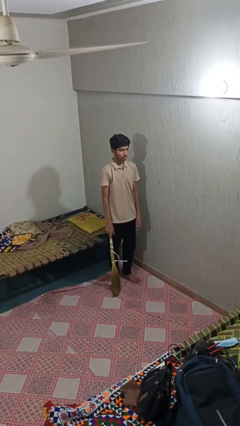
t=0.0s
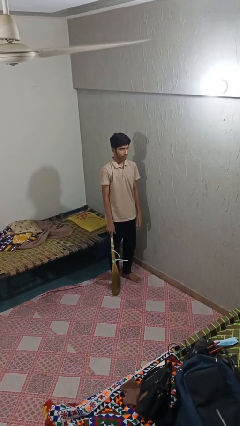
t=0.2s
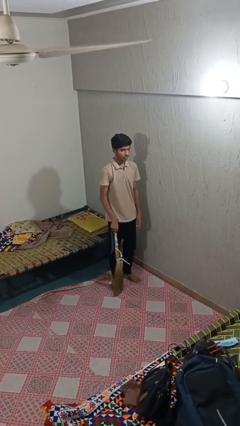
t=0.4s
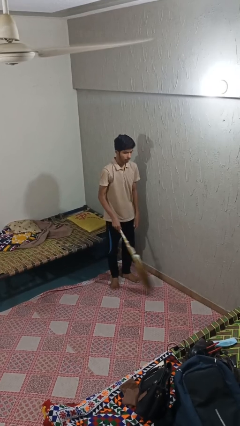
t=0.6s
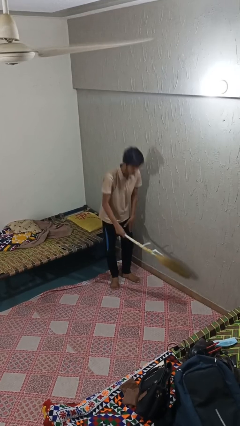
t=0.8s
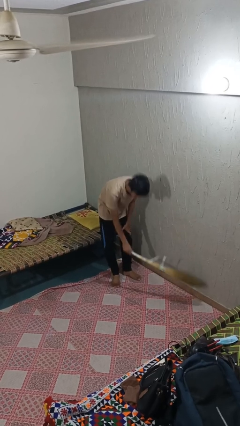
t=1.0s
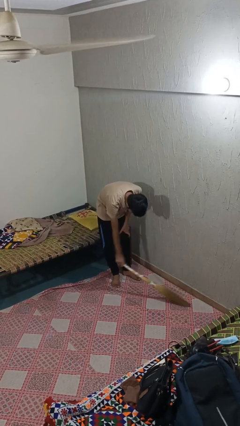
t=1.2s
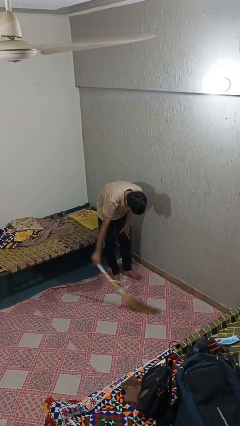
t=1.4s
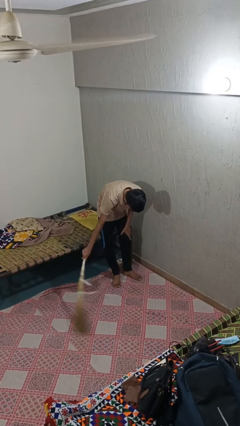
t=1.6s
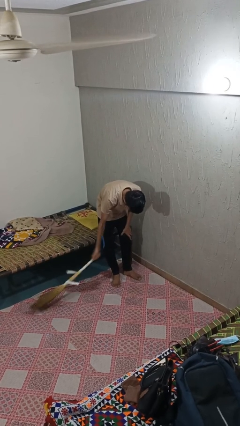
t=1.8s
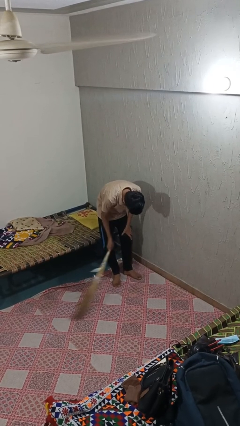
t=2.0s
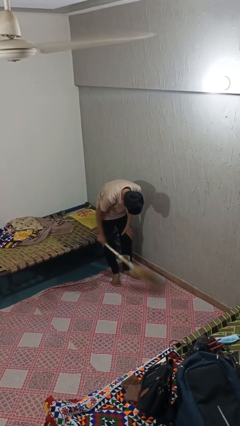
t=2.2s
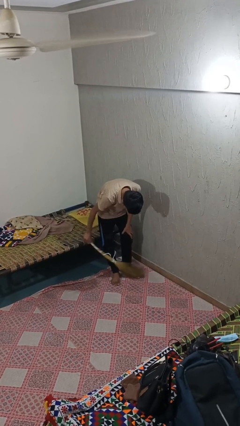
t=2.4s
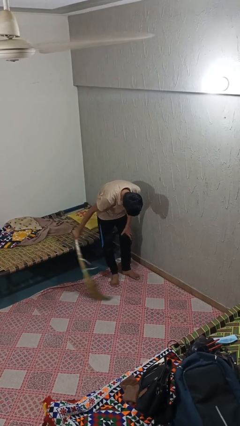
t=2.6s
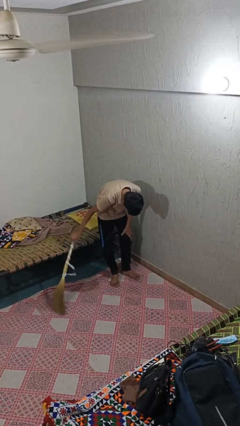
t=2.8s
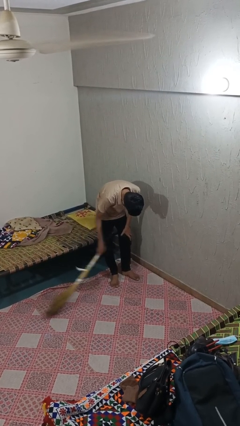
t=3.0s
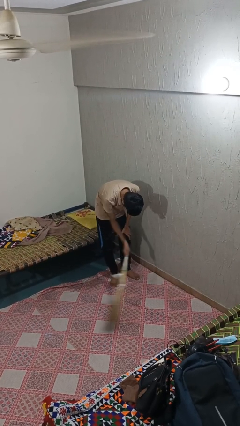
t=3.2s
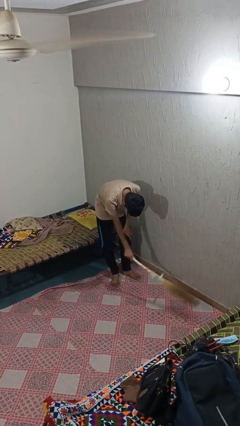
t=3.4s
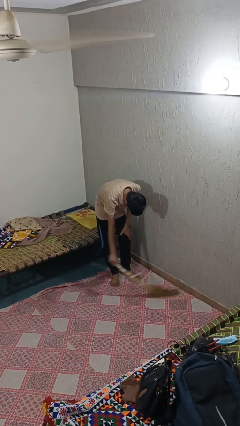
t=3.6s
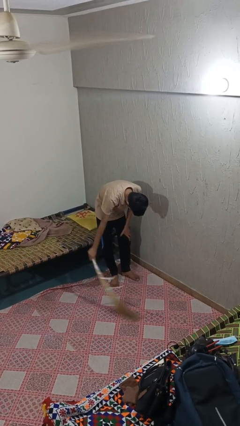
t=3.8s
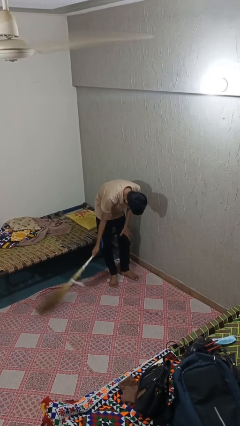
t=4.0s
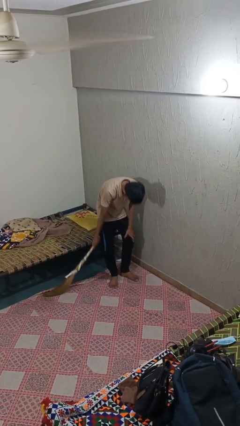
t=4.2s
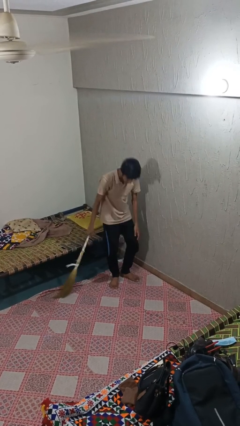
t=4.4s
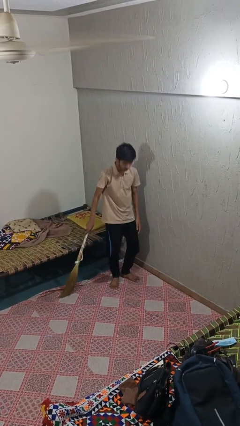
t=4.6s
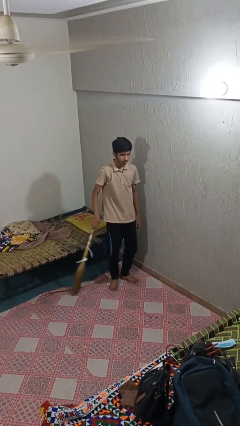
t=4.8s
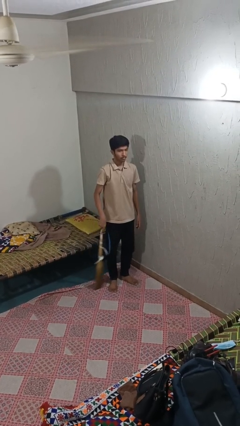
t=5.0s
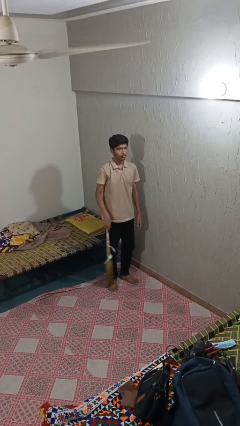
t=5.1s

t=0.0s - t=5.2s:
person sweeps floor

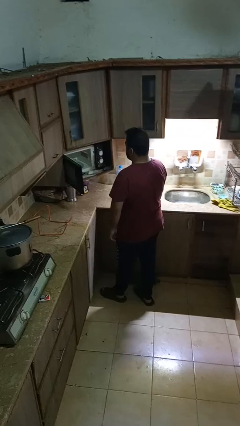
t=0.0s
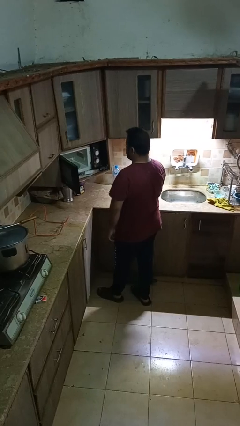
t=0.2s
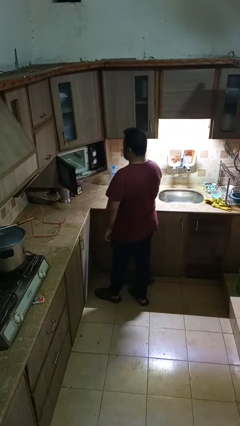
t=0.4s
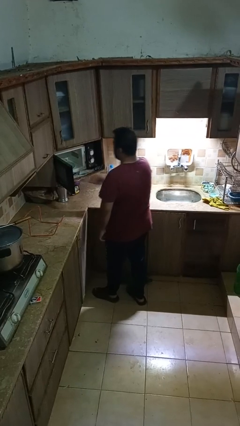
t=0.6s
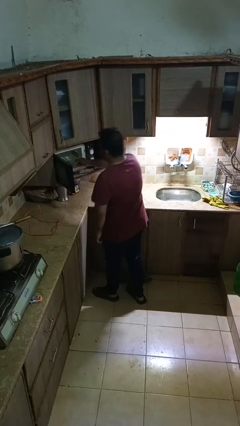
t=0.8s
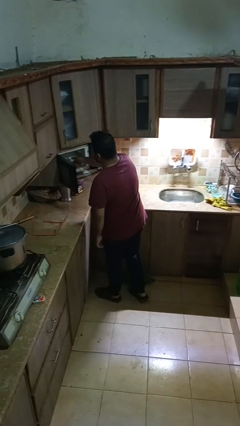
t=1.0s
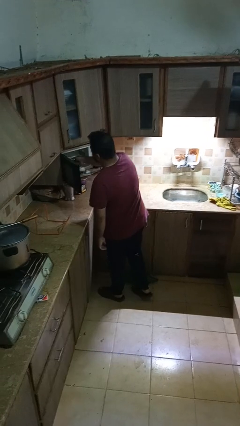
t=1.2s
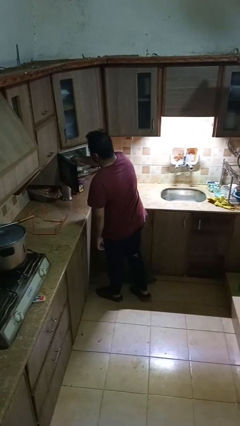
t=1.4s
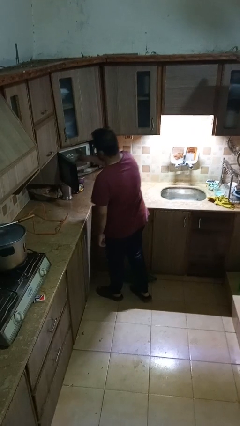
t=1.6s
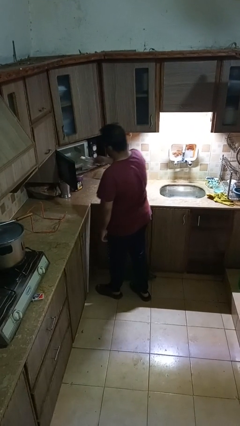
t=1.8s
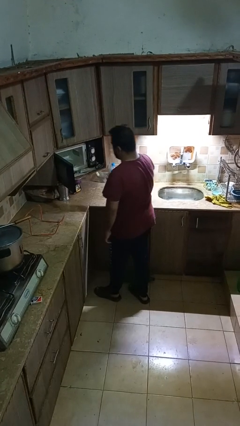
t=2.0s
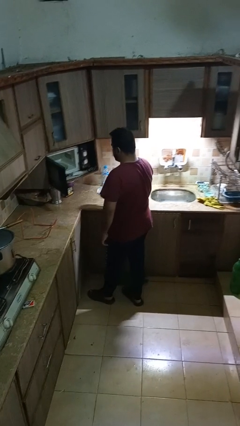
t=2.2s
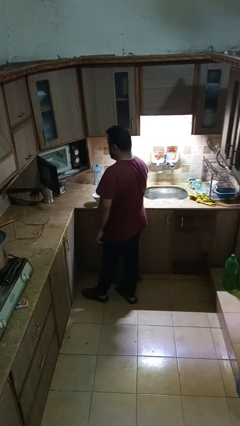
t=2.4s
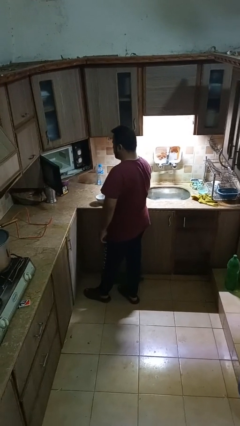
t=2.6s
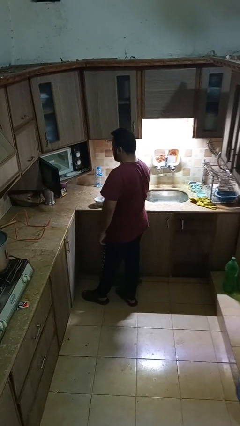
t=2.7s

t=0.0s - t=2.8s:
person takes object from microwave

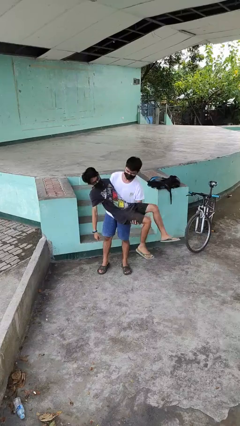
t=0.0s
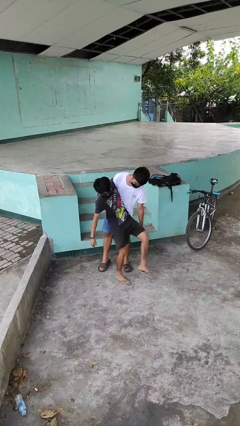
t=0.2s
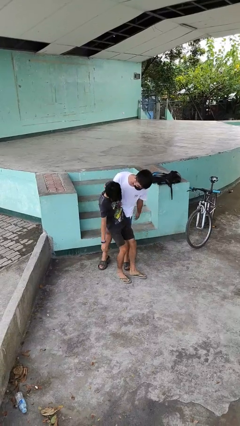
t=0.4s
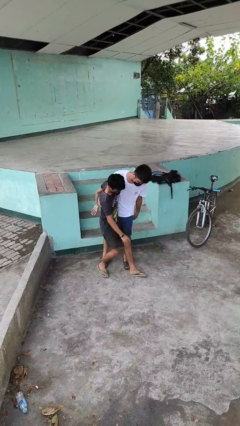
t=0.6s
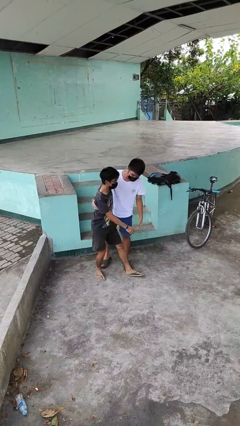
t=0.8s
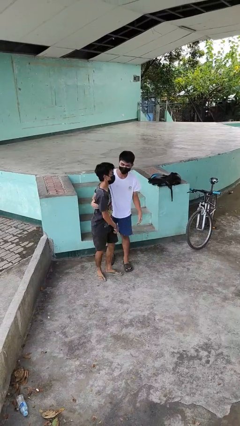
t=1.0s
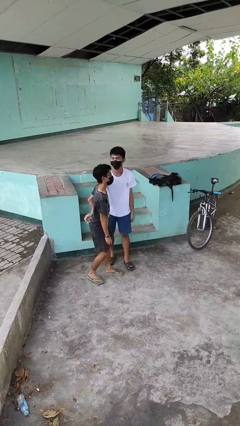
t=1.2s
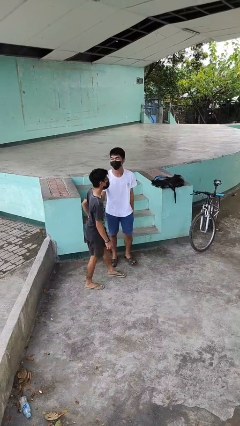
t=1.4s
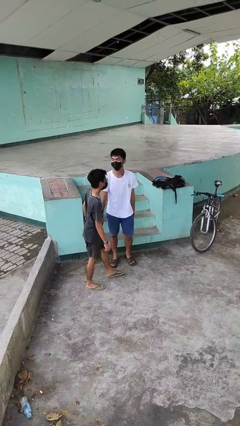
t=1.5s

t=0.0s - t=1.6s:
person puts down person

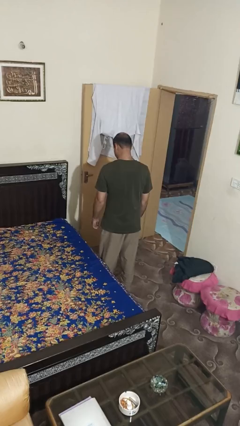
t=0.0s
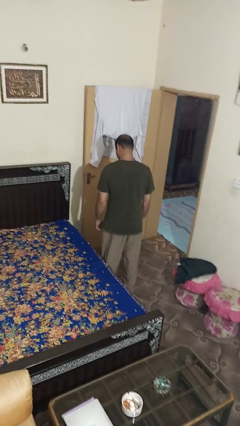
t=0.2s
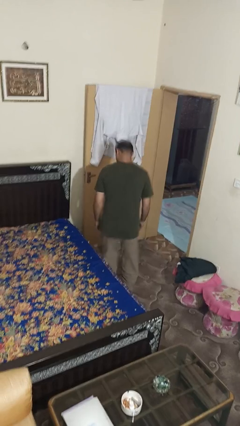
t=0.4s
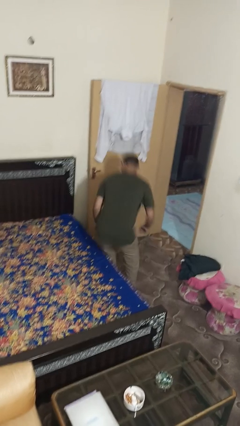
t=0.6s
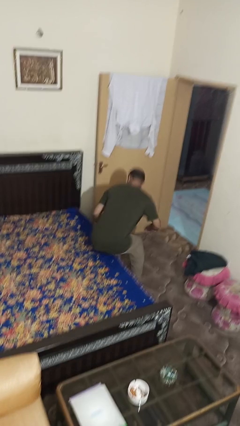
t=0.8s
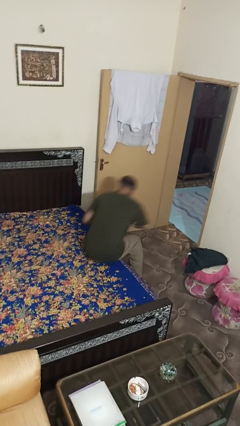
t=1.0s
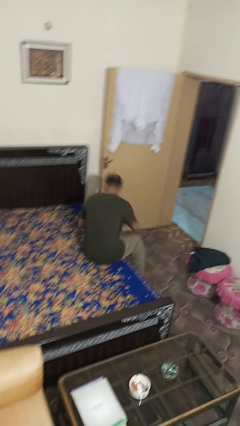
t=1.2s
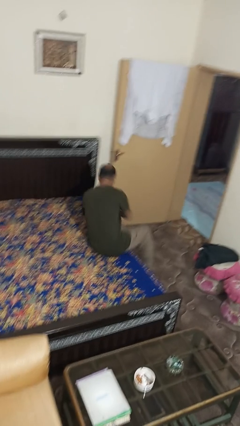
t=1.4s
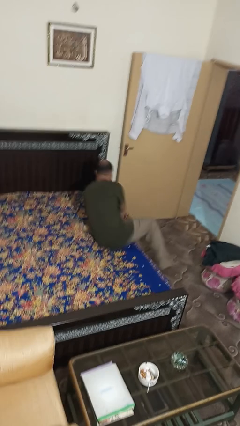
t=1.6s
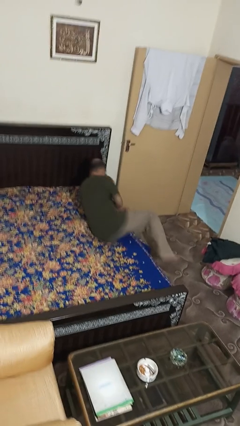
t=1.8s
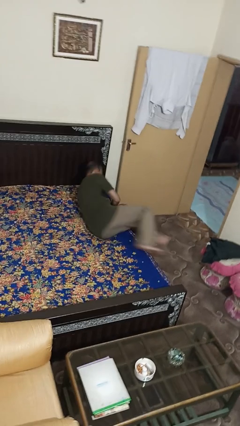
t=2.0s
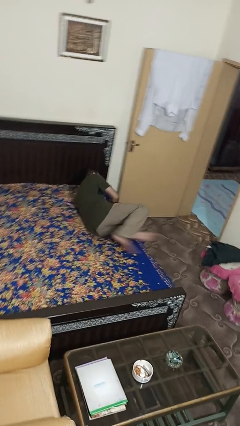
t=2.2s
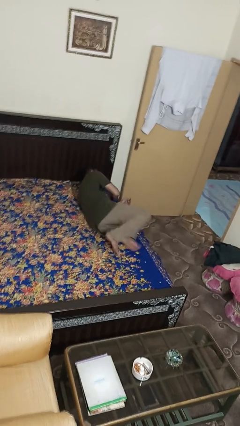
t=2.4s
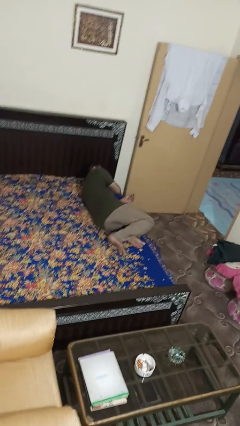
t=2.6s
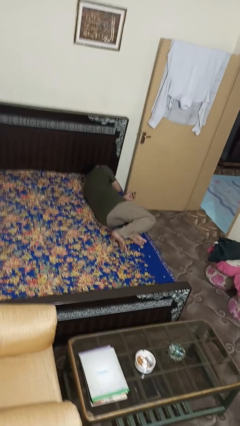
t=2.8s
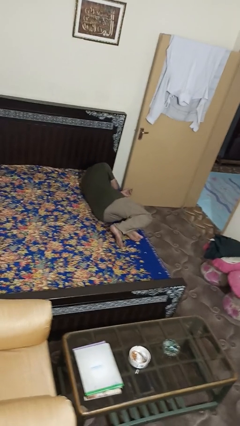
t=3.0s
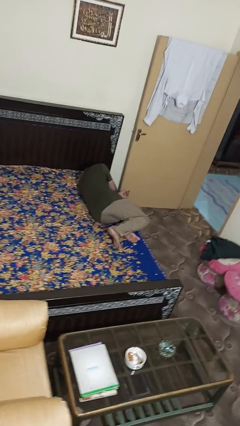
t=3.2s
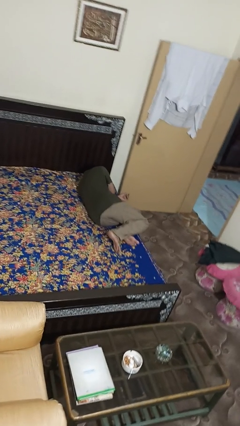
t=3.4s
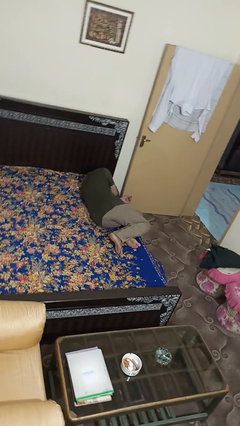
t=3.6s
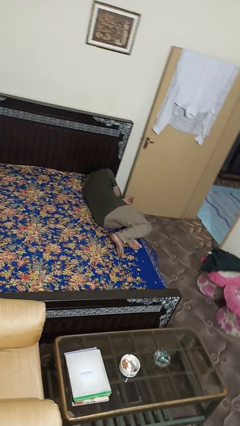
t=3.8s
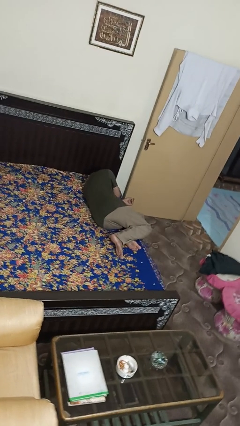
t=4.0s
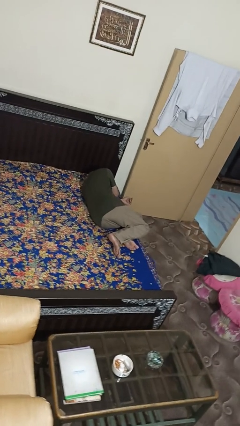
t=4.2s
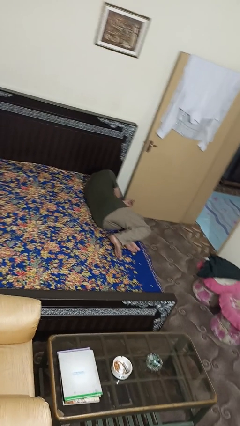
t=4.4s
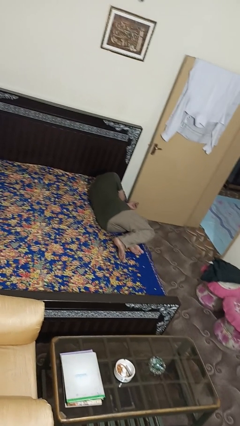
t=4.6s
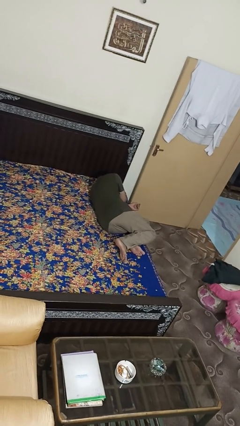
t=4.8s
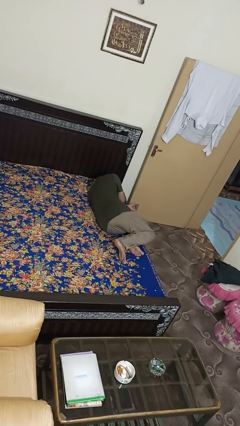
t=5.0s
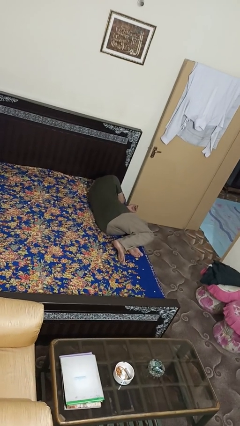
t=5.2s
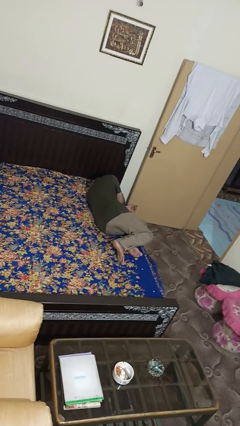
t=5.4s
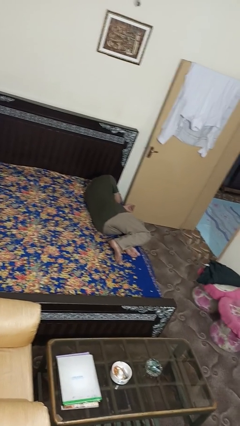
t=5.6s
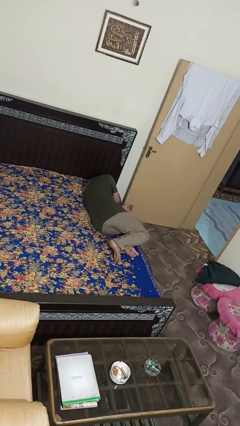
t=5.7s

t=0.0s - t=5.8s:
person lies down on bed

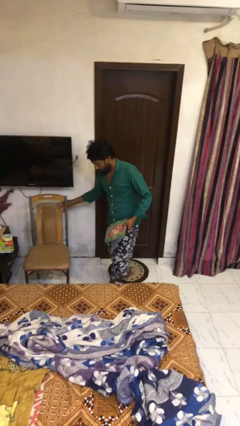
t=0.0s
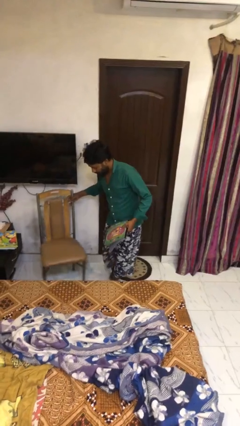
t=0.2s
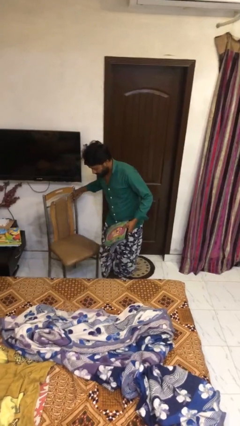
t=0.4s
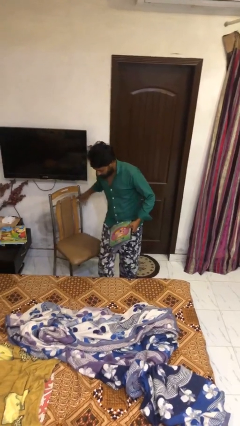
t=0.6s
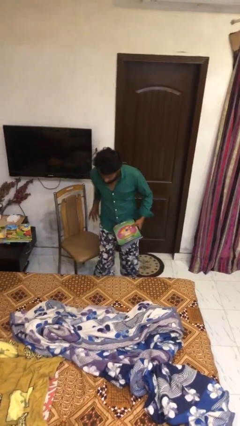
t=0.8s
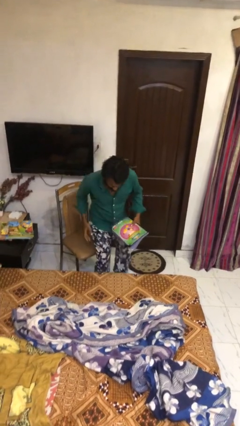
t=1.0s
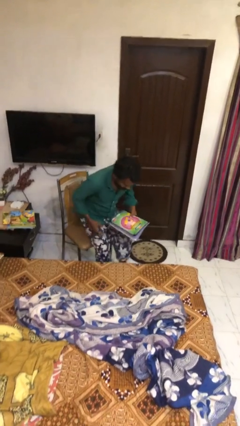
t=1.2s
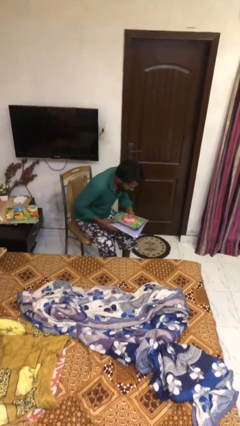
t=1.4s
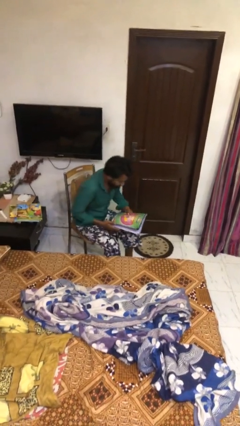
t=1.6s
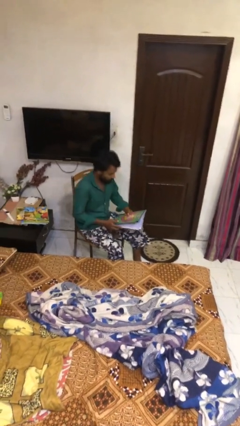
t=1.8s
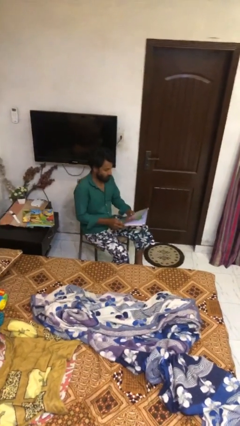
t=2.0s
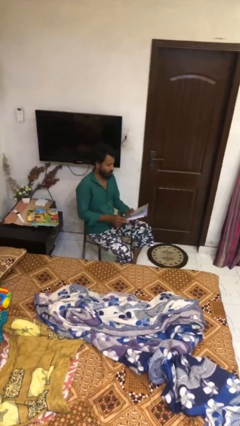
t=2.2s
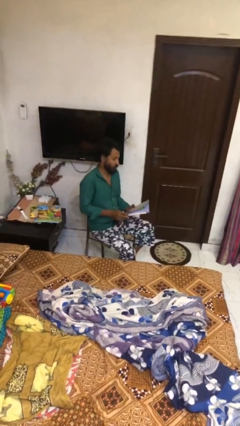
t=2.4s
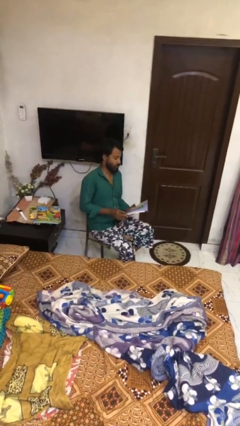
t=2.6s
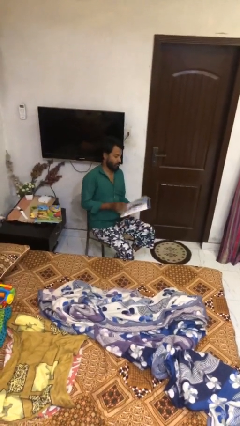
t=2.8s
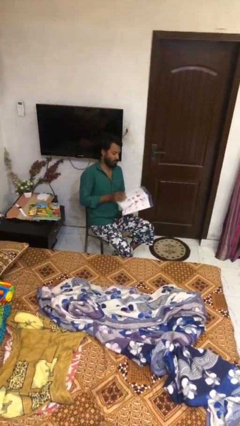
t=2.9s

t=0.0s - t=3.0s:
person sits down
